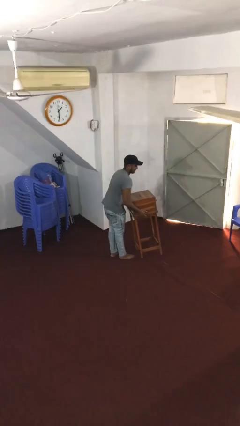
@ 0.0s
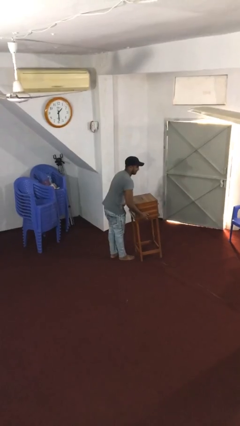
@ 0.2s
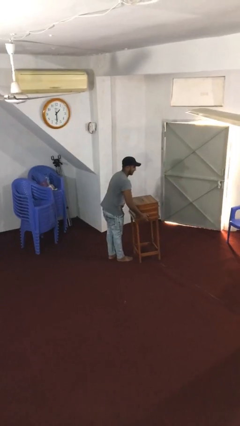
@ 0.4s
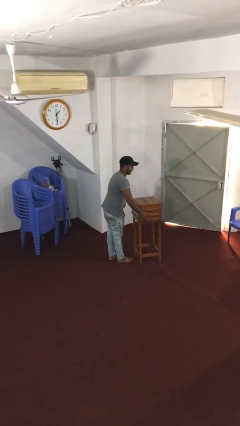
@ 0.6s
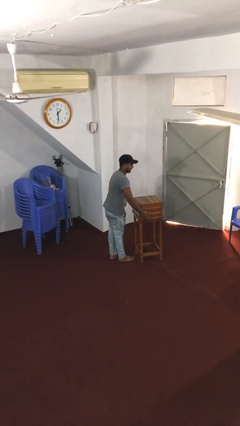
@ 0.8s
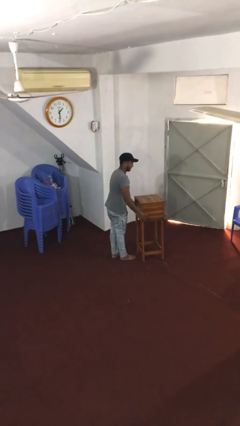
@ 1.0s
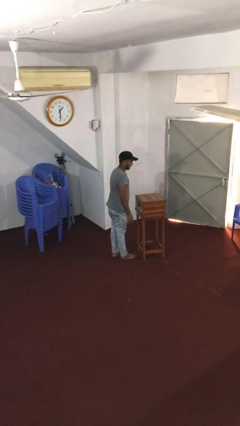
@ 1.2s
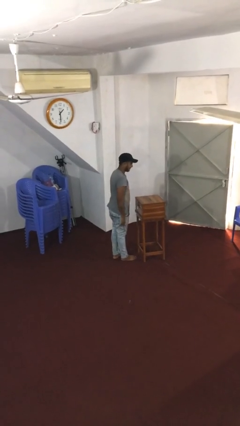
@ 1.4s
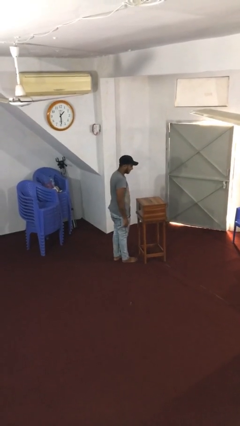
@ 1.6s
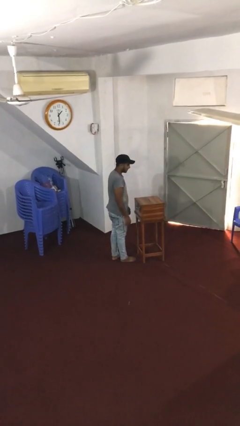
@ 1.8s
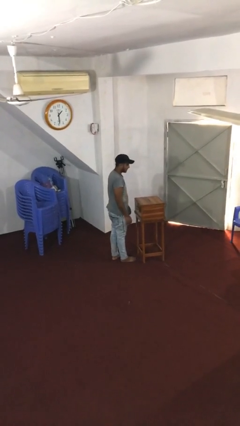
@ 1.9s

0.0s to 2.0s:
person puts down object on floor

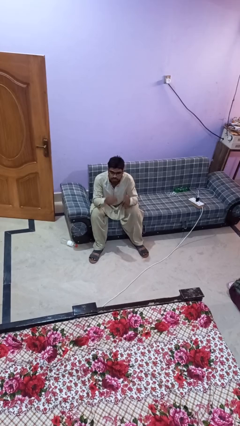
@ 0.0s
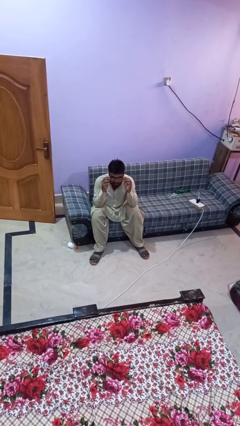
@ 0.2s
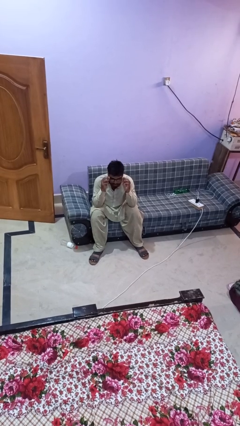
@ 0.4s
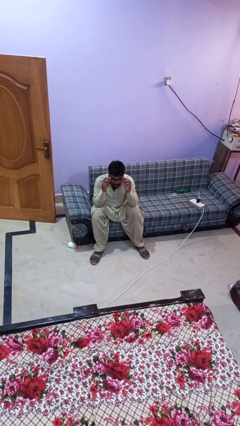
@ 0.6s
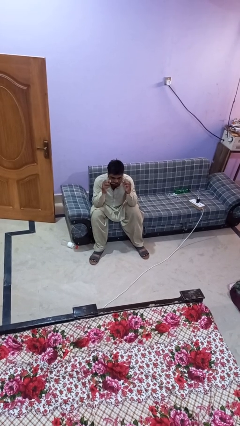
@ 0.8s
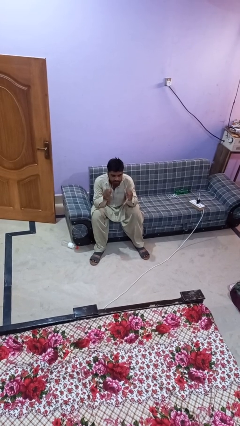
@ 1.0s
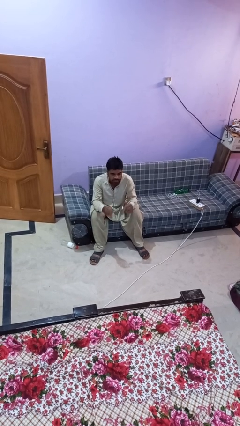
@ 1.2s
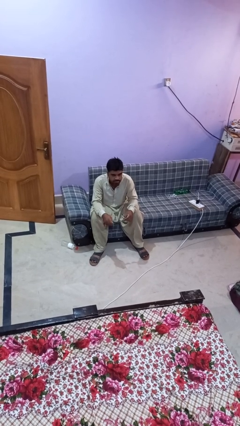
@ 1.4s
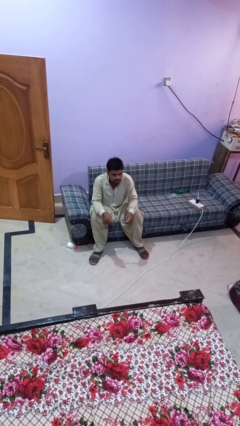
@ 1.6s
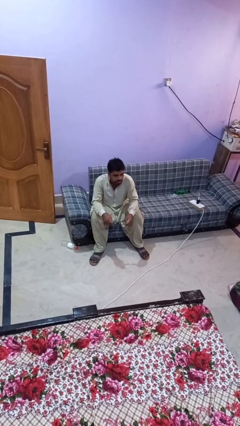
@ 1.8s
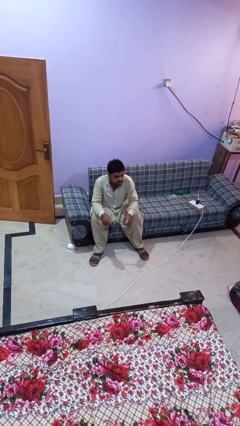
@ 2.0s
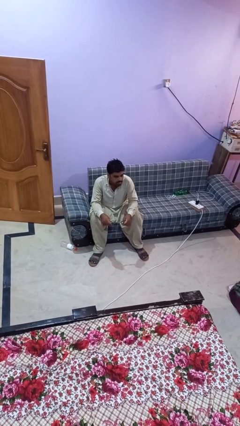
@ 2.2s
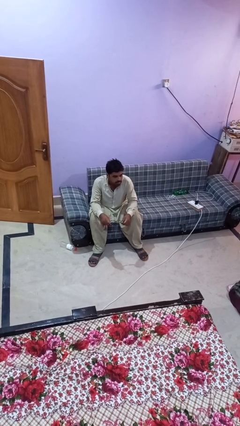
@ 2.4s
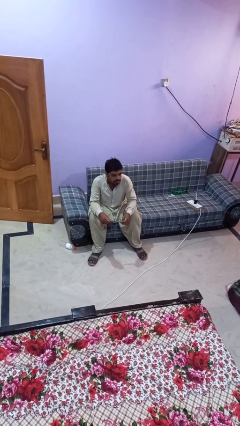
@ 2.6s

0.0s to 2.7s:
person takes off glasses

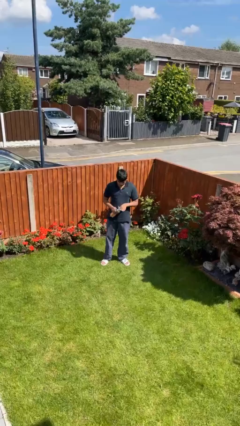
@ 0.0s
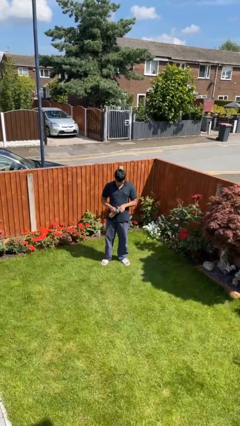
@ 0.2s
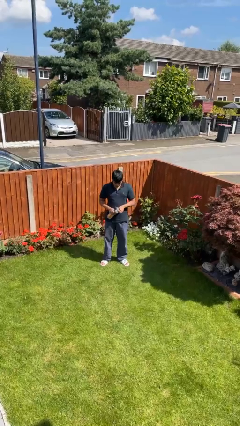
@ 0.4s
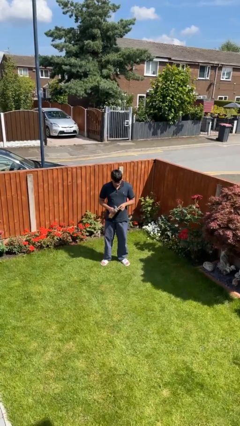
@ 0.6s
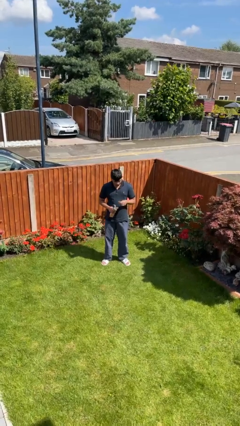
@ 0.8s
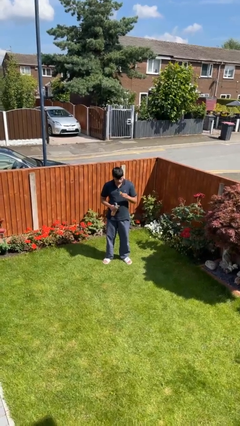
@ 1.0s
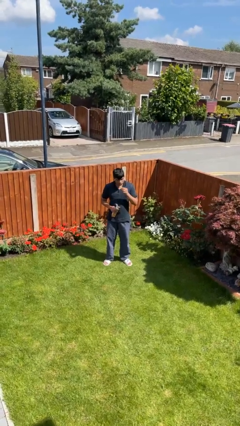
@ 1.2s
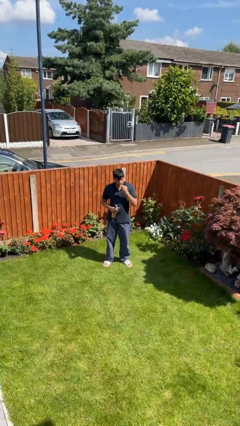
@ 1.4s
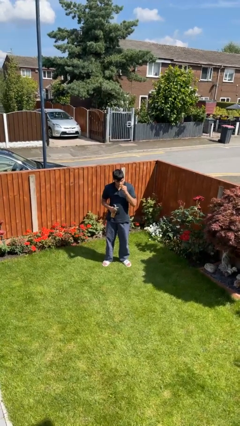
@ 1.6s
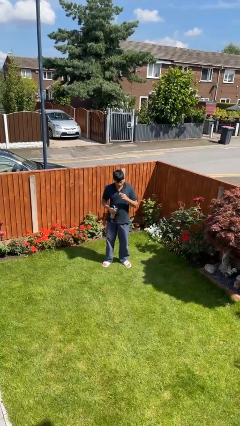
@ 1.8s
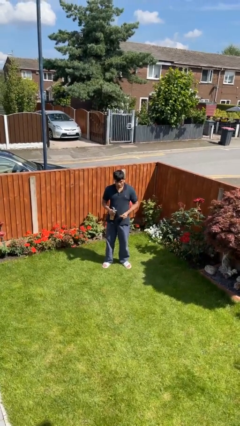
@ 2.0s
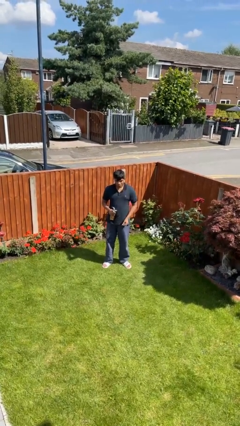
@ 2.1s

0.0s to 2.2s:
person eats snack from bag

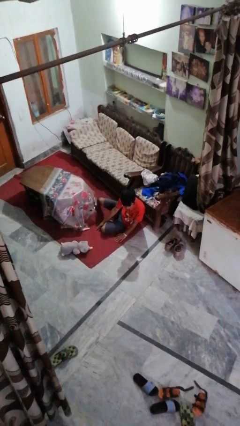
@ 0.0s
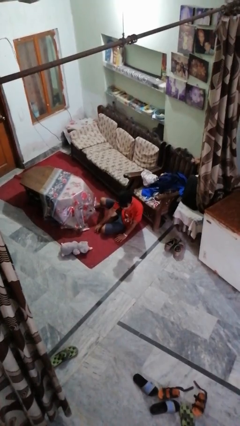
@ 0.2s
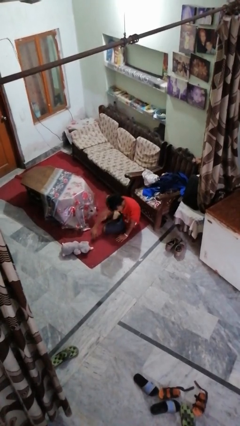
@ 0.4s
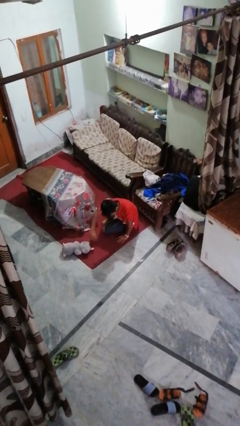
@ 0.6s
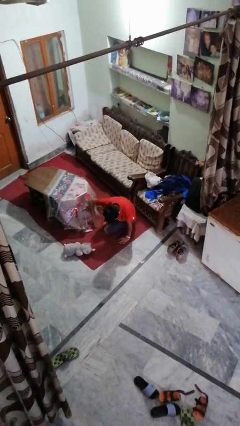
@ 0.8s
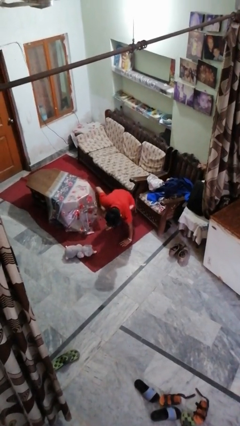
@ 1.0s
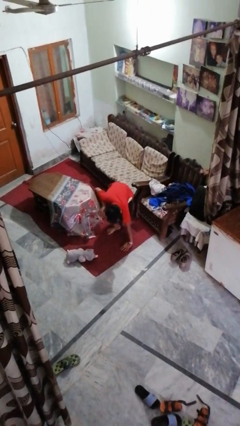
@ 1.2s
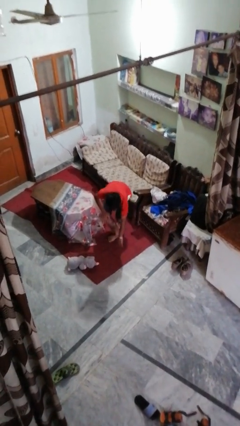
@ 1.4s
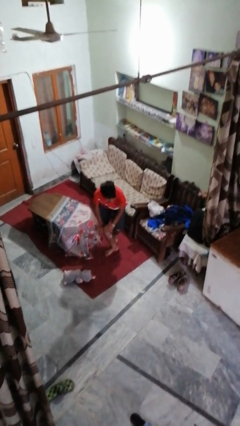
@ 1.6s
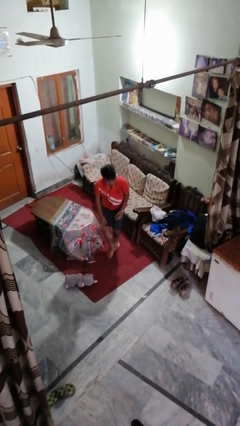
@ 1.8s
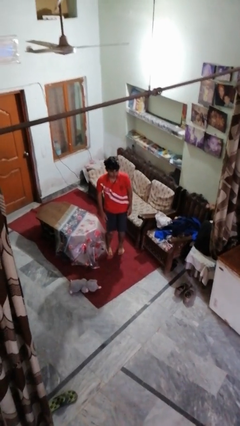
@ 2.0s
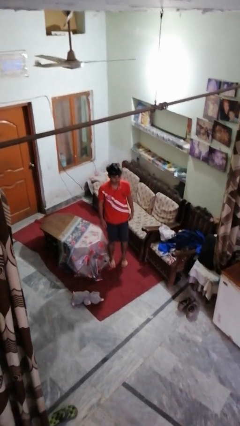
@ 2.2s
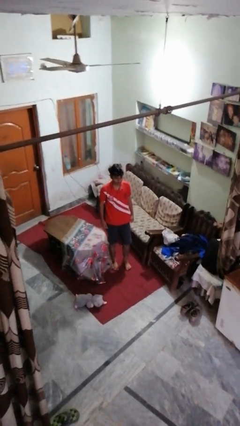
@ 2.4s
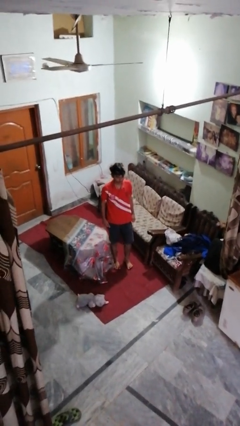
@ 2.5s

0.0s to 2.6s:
person stands up from floor

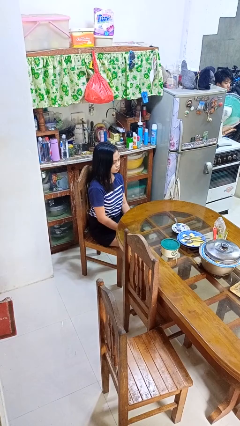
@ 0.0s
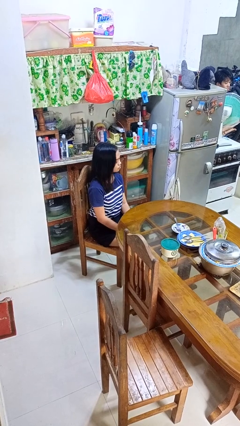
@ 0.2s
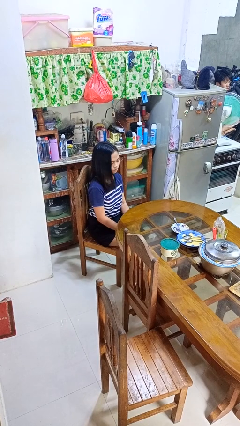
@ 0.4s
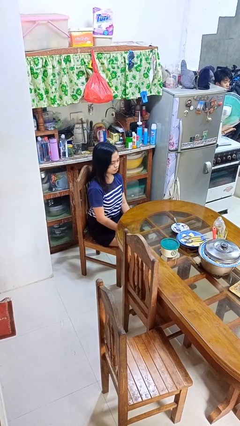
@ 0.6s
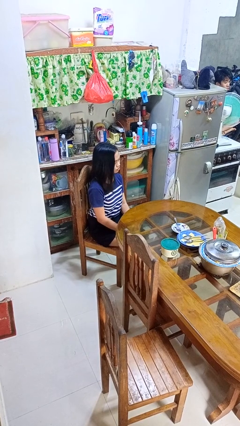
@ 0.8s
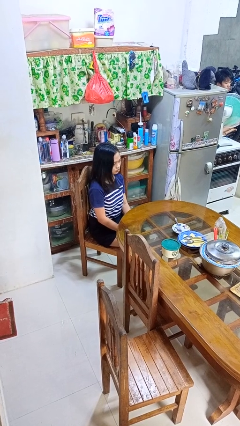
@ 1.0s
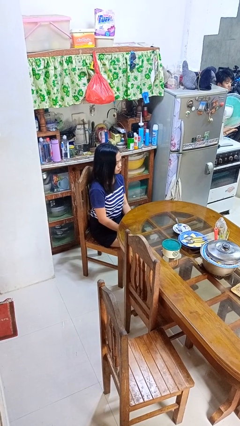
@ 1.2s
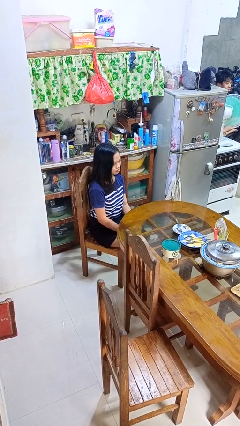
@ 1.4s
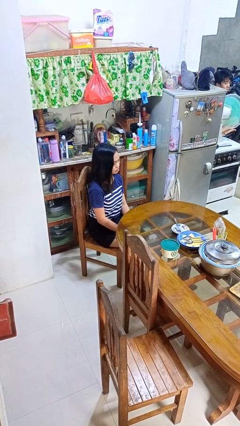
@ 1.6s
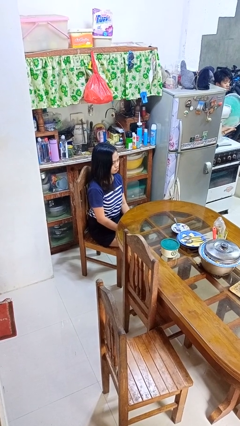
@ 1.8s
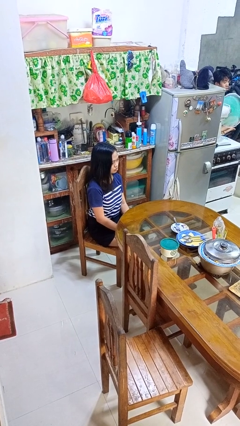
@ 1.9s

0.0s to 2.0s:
person shakes head

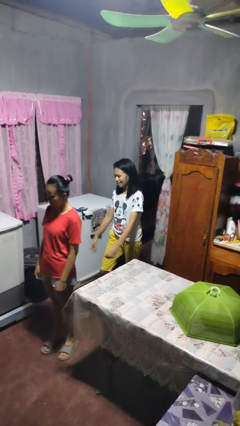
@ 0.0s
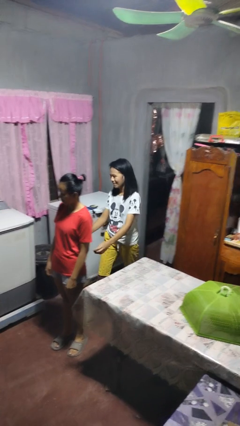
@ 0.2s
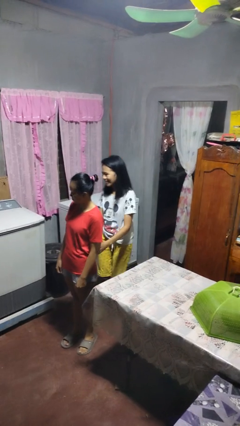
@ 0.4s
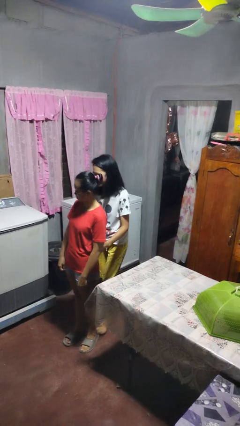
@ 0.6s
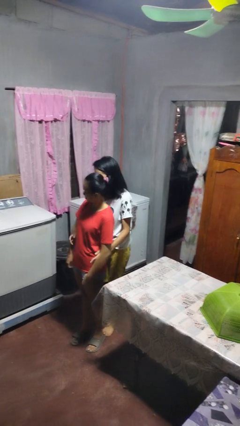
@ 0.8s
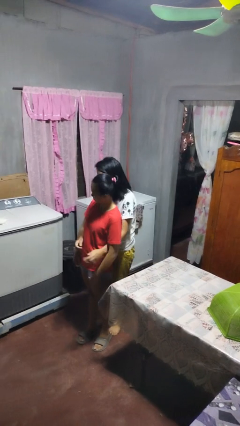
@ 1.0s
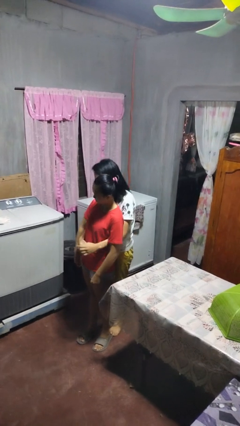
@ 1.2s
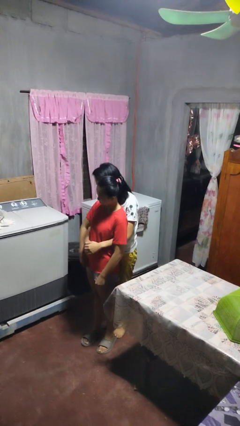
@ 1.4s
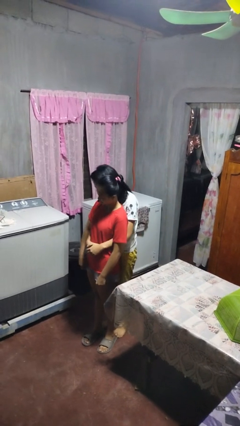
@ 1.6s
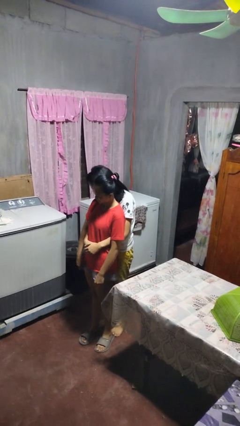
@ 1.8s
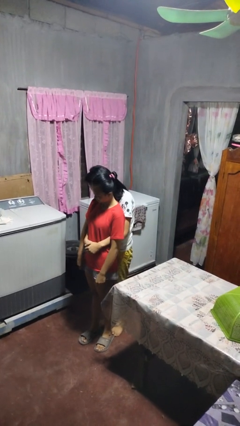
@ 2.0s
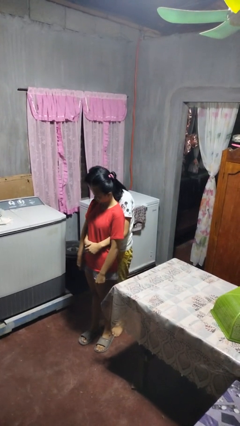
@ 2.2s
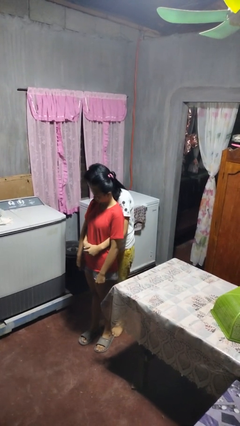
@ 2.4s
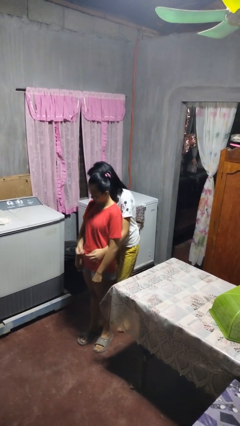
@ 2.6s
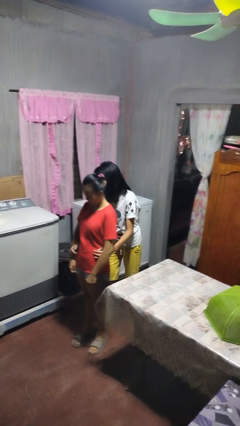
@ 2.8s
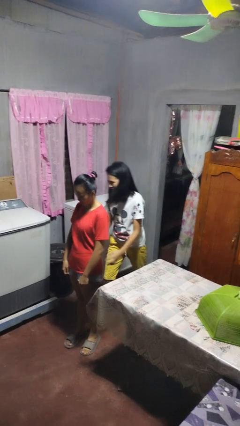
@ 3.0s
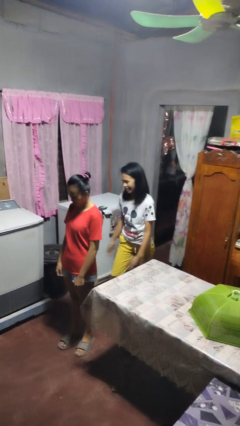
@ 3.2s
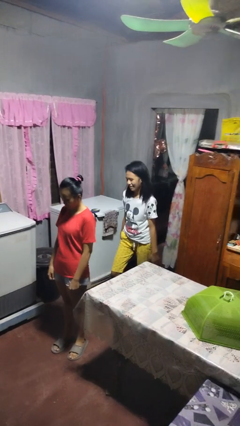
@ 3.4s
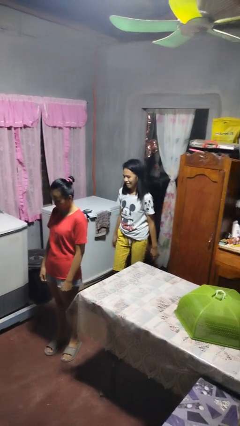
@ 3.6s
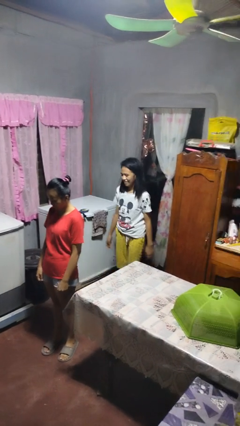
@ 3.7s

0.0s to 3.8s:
person hugs person from behind

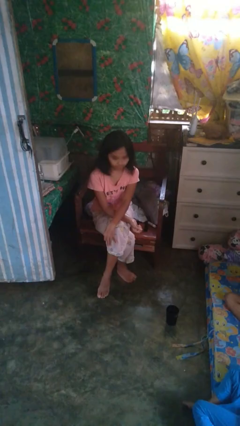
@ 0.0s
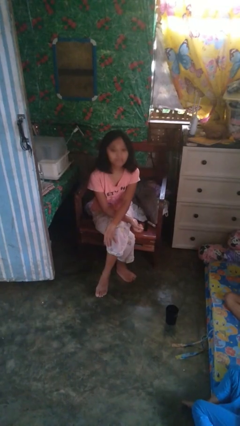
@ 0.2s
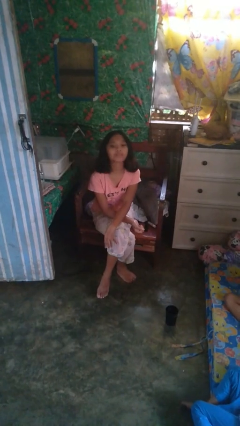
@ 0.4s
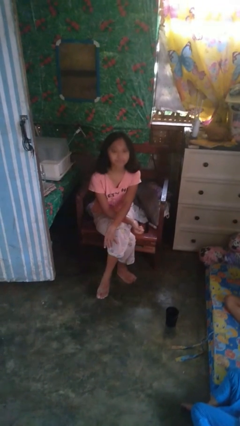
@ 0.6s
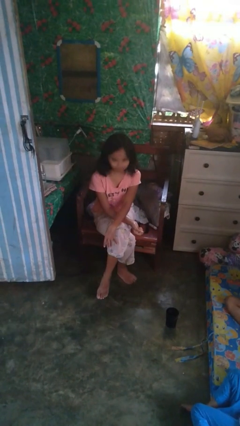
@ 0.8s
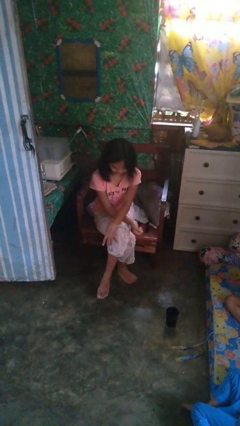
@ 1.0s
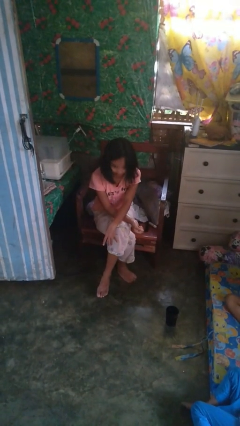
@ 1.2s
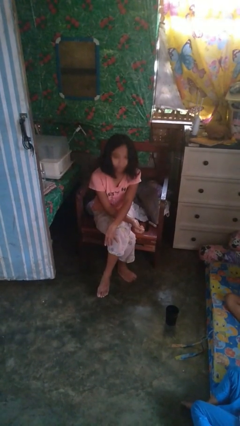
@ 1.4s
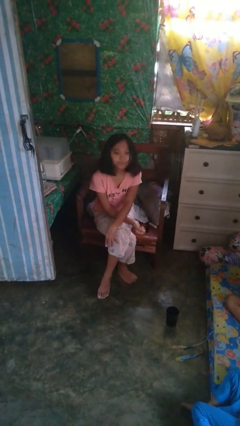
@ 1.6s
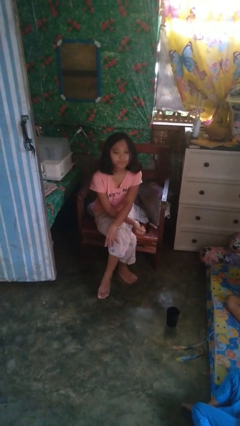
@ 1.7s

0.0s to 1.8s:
person nods head
